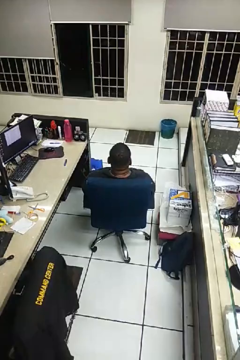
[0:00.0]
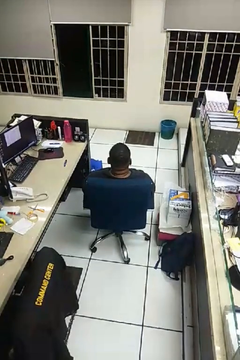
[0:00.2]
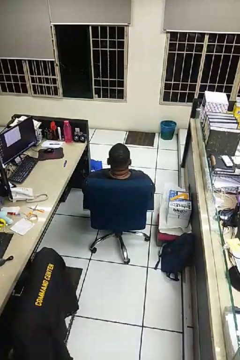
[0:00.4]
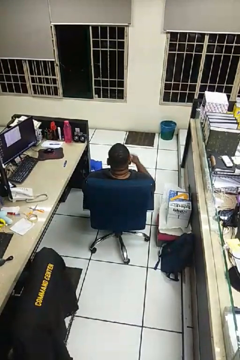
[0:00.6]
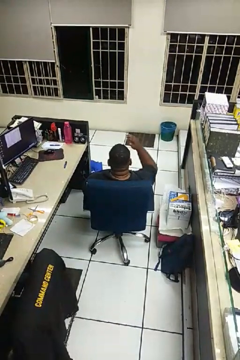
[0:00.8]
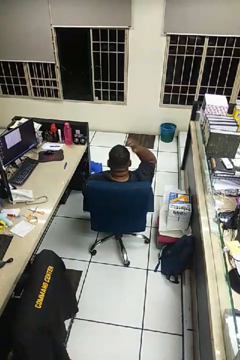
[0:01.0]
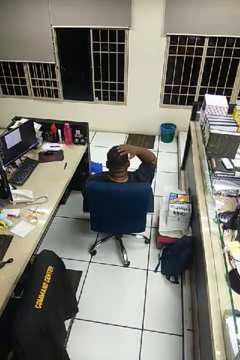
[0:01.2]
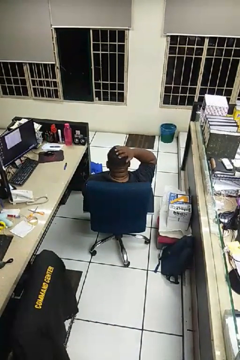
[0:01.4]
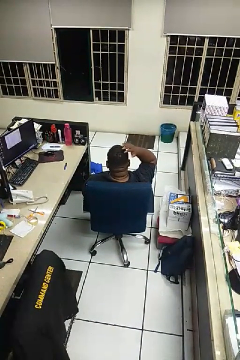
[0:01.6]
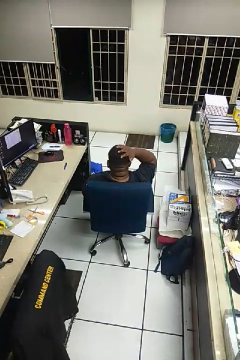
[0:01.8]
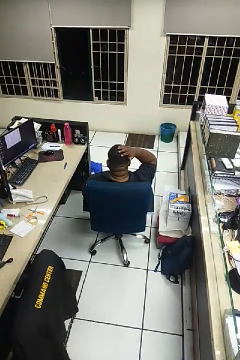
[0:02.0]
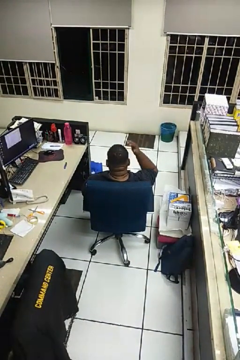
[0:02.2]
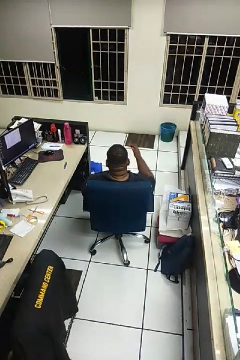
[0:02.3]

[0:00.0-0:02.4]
person pats head

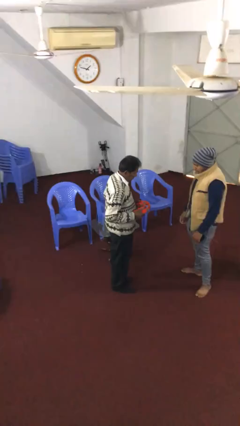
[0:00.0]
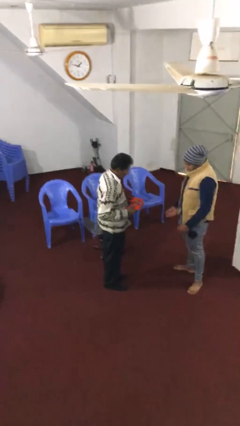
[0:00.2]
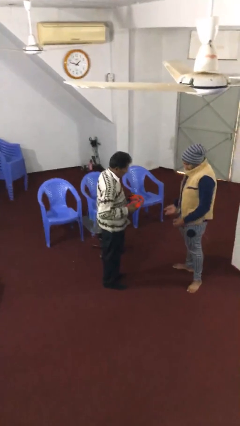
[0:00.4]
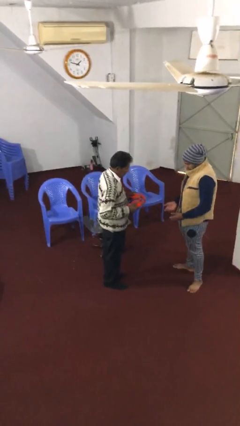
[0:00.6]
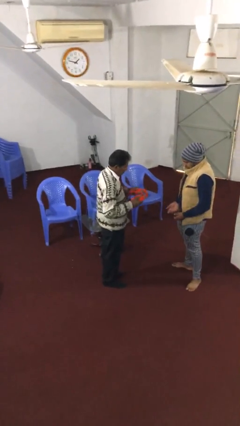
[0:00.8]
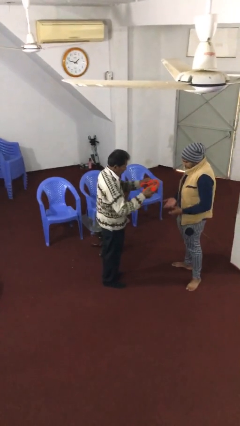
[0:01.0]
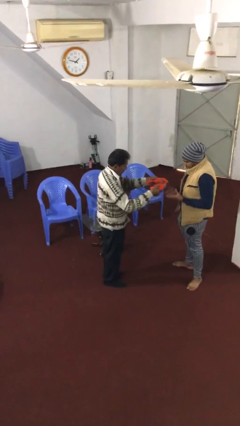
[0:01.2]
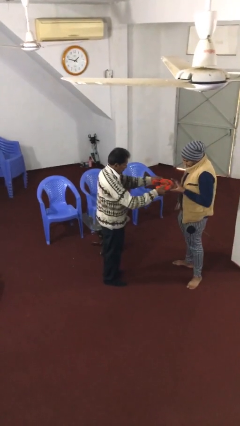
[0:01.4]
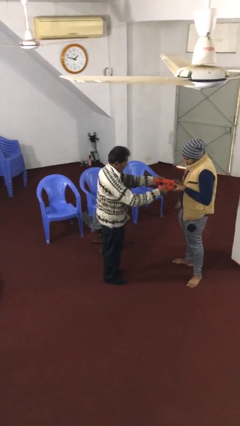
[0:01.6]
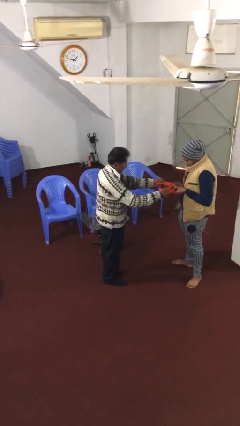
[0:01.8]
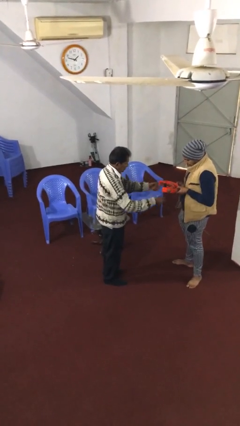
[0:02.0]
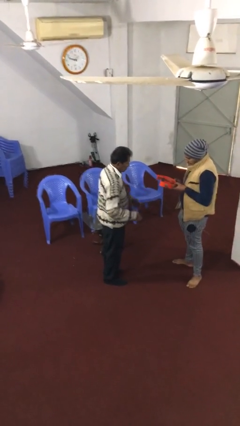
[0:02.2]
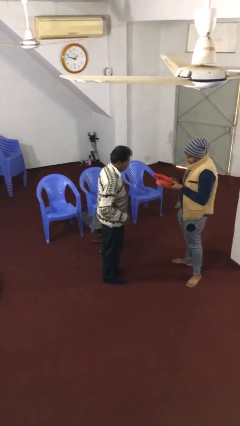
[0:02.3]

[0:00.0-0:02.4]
person transfers object to person

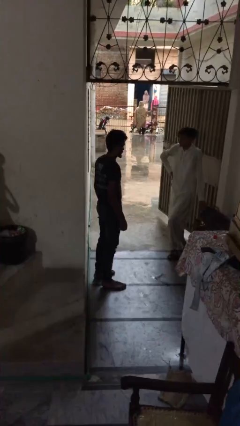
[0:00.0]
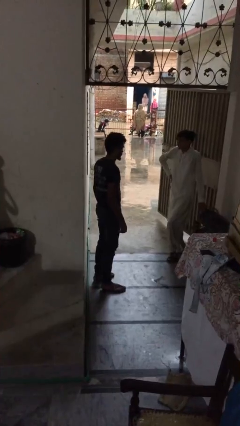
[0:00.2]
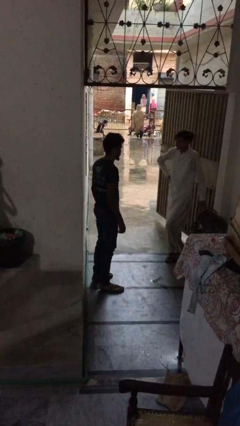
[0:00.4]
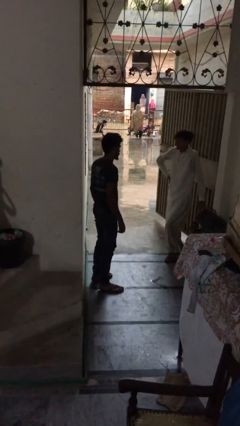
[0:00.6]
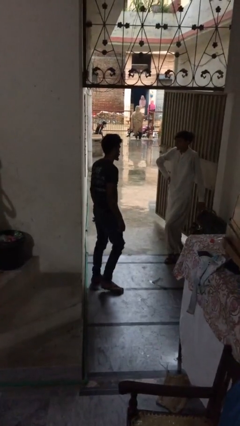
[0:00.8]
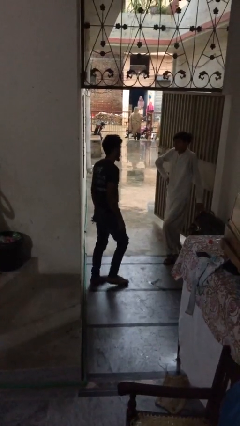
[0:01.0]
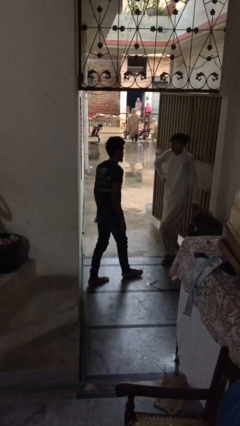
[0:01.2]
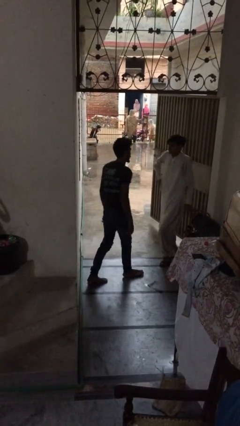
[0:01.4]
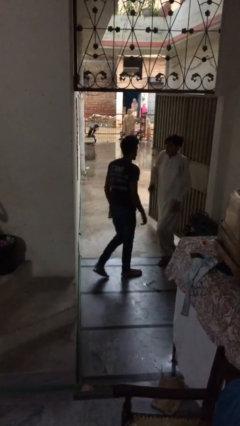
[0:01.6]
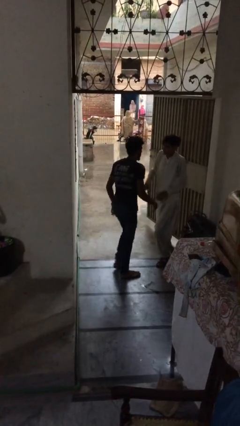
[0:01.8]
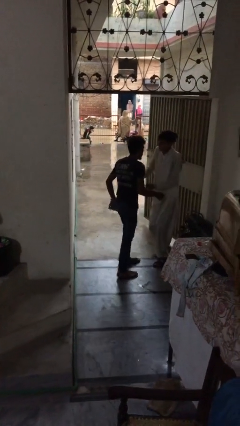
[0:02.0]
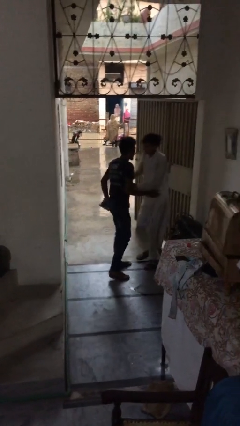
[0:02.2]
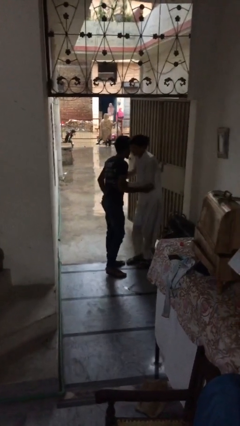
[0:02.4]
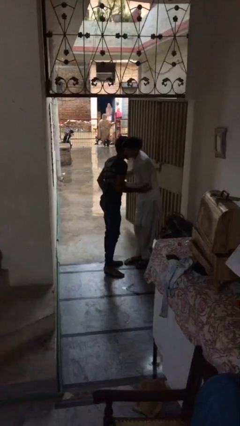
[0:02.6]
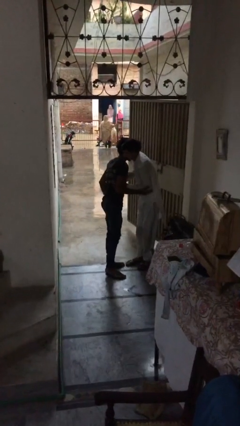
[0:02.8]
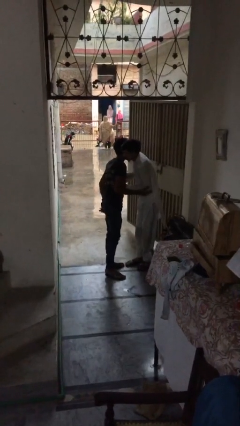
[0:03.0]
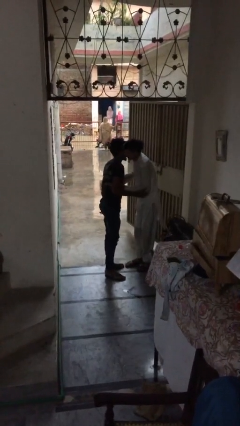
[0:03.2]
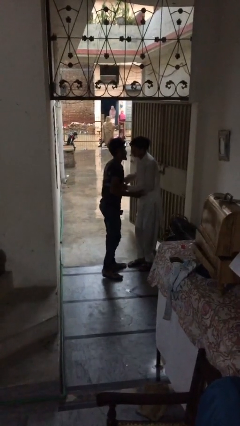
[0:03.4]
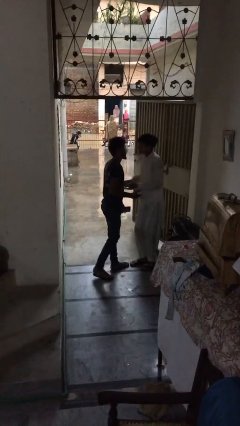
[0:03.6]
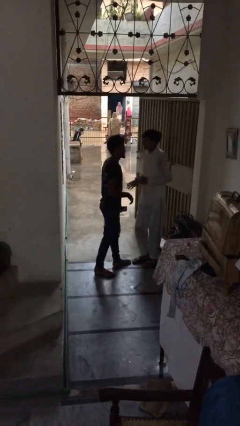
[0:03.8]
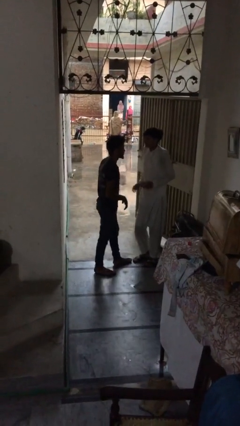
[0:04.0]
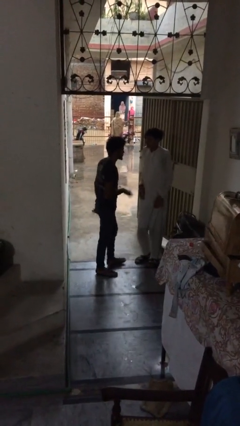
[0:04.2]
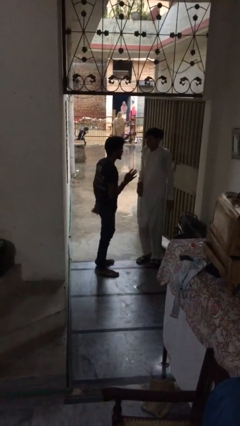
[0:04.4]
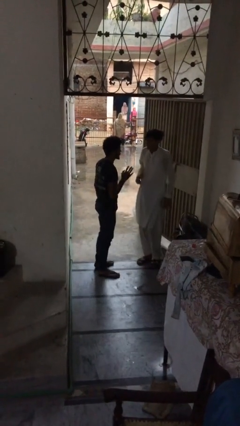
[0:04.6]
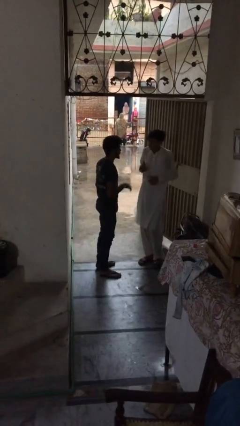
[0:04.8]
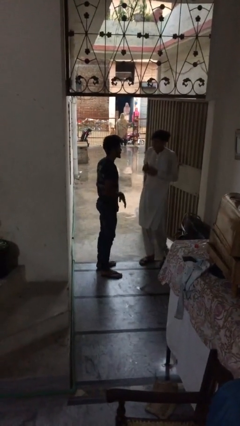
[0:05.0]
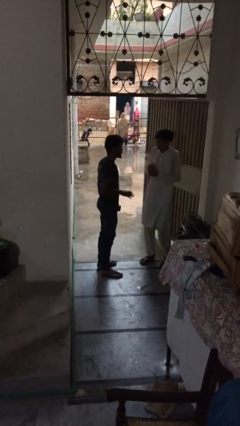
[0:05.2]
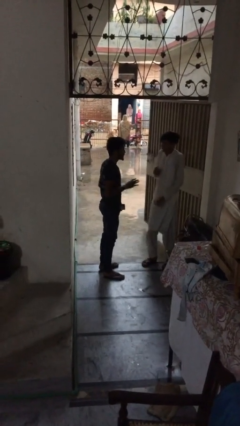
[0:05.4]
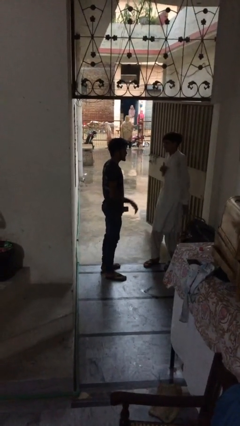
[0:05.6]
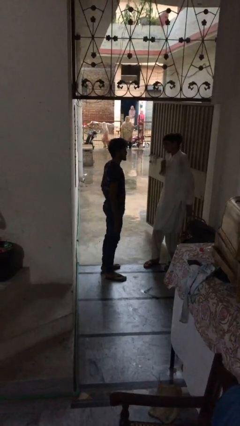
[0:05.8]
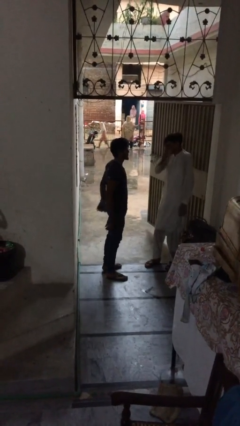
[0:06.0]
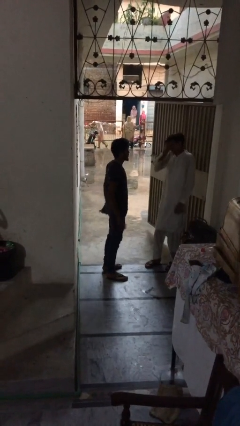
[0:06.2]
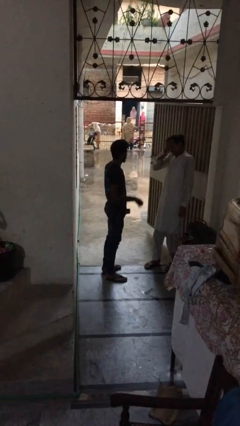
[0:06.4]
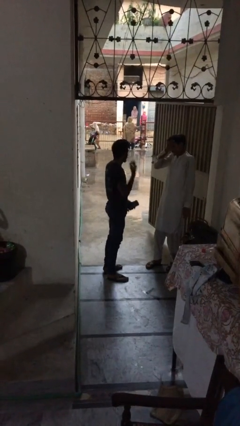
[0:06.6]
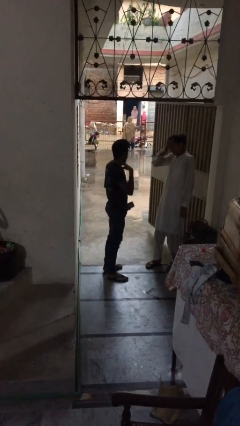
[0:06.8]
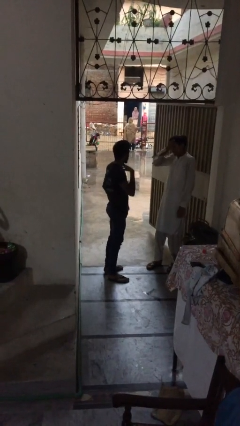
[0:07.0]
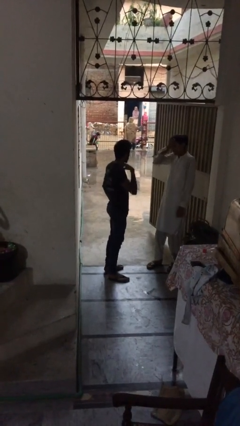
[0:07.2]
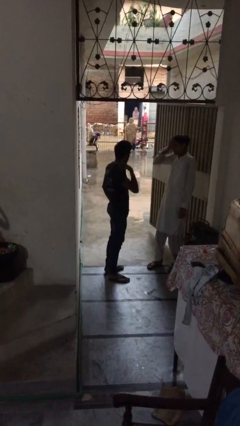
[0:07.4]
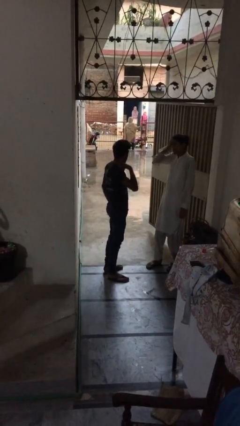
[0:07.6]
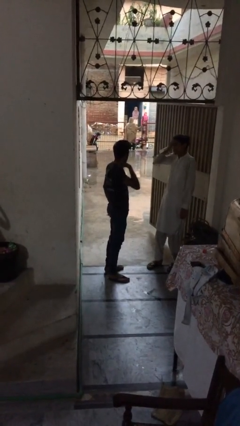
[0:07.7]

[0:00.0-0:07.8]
person embraces person

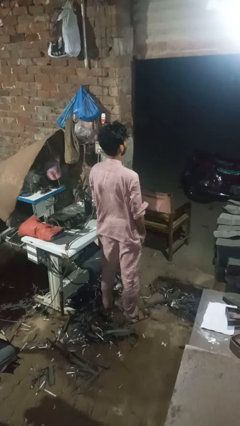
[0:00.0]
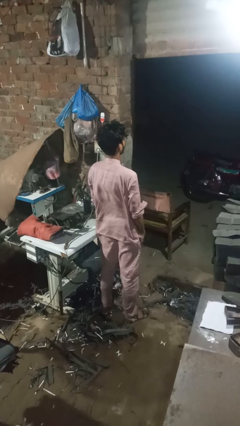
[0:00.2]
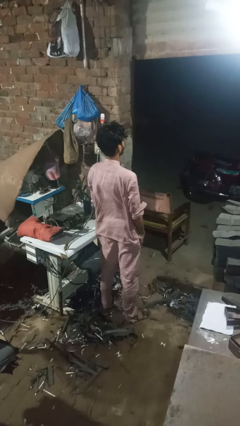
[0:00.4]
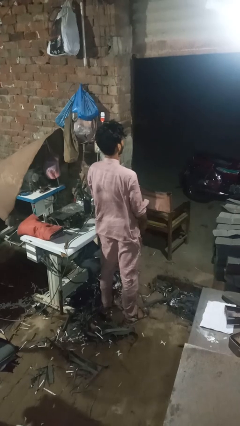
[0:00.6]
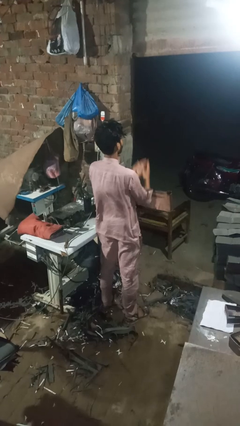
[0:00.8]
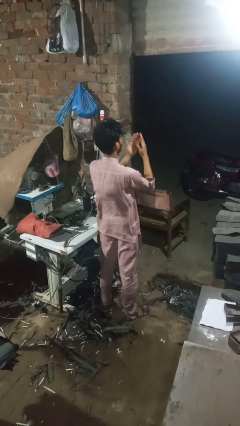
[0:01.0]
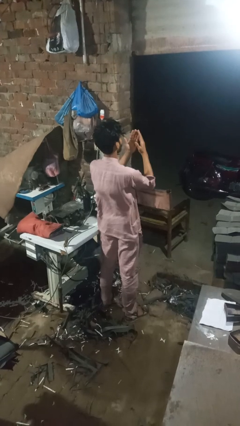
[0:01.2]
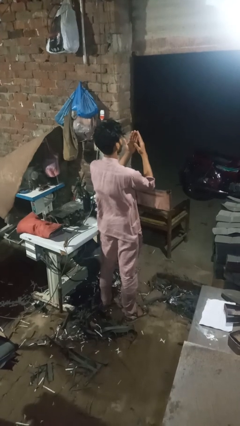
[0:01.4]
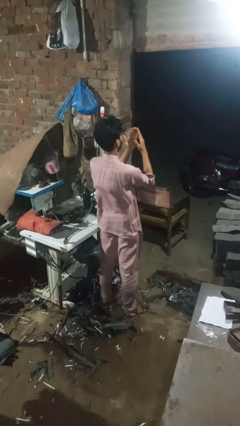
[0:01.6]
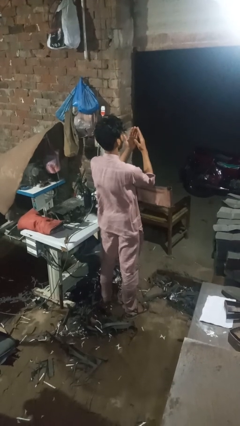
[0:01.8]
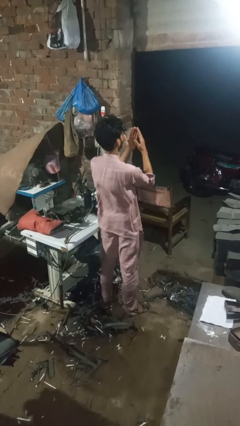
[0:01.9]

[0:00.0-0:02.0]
person prays

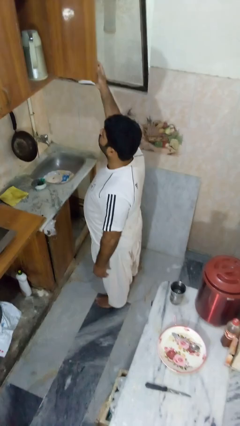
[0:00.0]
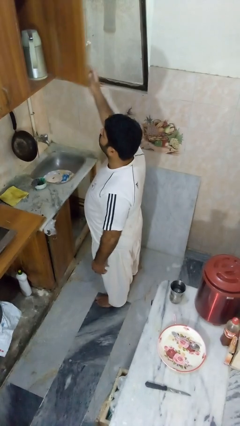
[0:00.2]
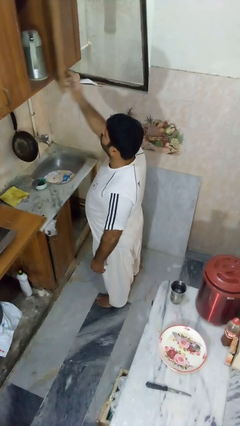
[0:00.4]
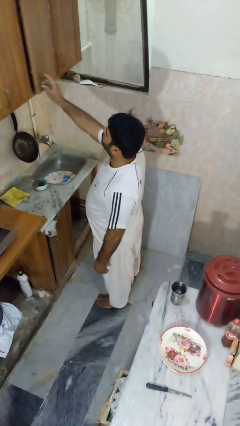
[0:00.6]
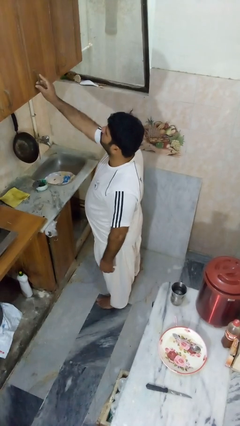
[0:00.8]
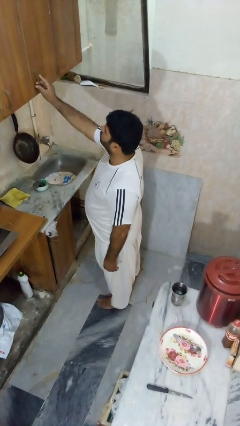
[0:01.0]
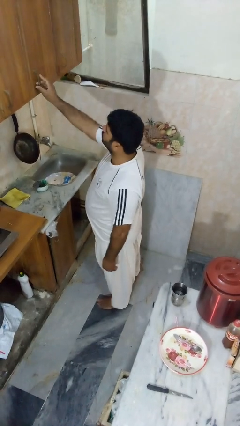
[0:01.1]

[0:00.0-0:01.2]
person closes cabinet

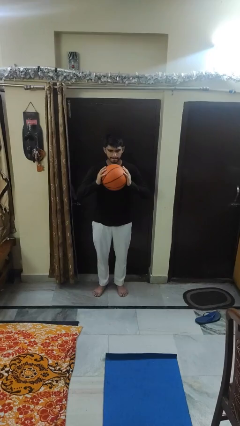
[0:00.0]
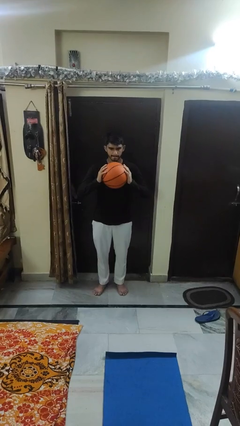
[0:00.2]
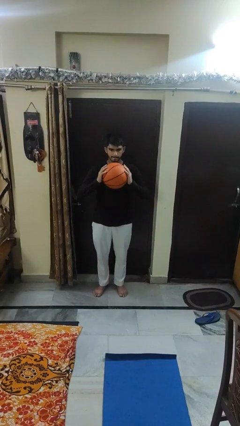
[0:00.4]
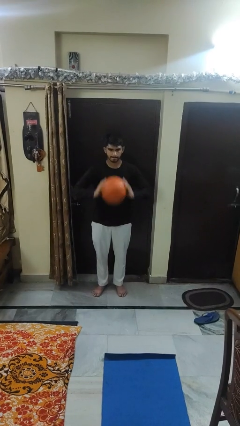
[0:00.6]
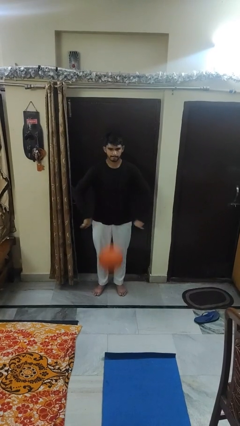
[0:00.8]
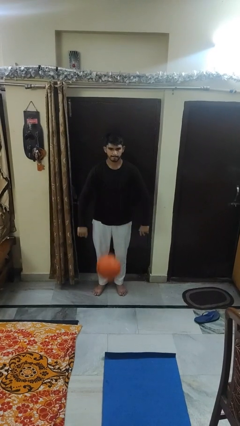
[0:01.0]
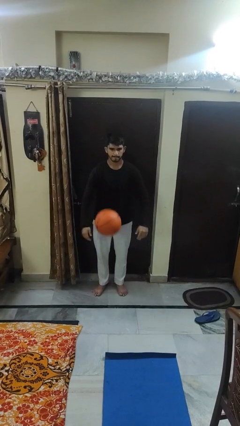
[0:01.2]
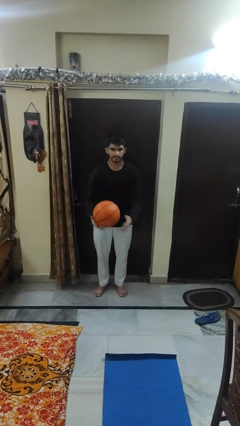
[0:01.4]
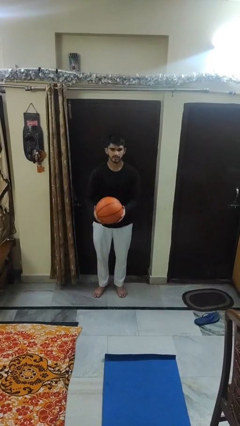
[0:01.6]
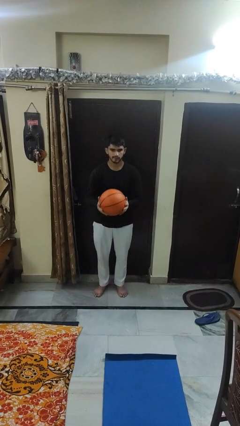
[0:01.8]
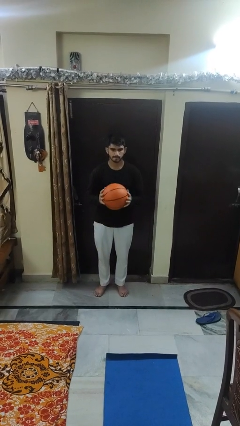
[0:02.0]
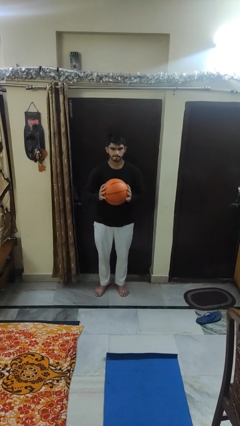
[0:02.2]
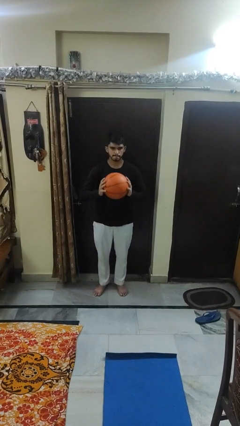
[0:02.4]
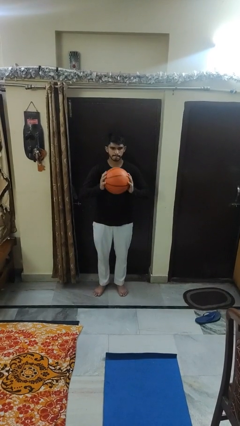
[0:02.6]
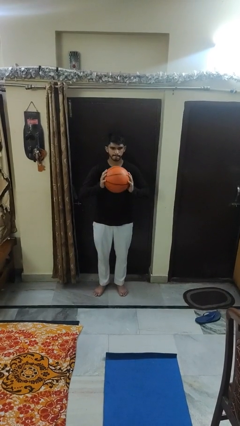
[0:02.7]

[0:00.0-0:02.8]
person bounces ball on floor
